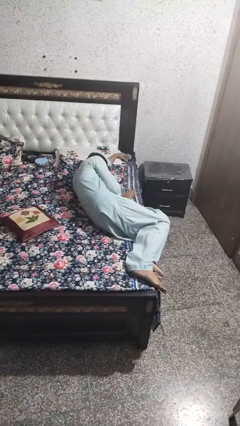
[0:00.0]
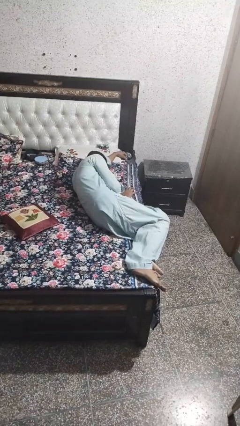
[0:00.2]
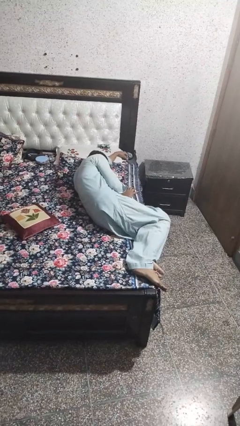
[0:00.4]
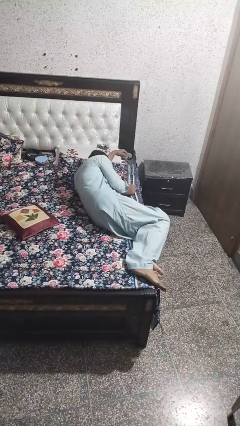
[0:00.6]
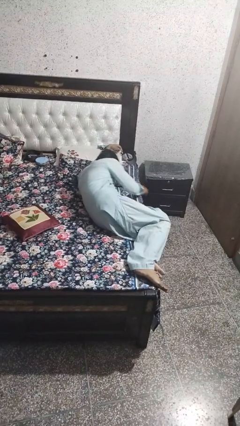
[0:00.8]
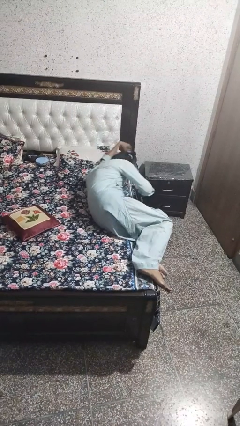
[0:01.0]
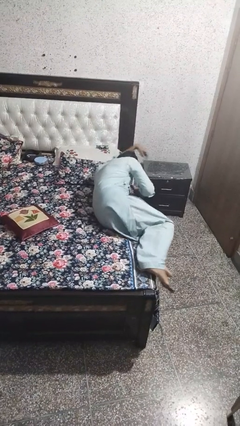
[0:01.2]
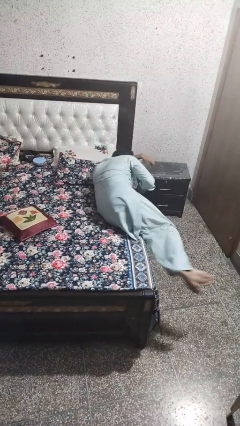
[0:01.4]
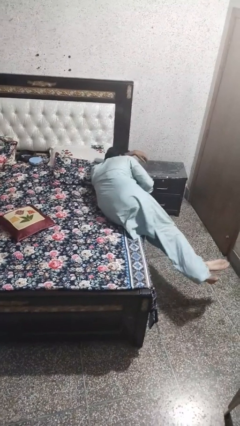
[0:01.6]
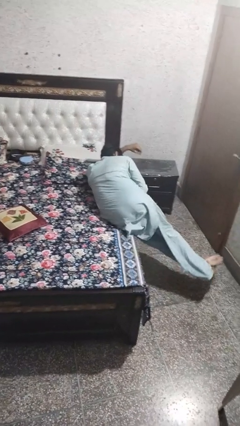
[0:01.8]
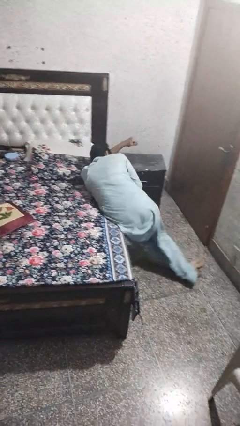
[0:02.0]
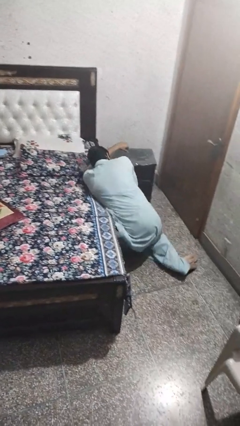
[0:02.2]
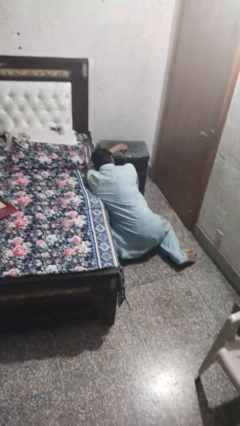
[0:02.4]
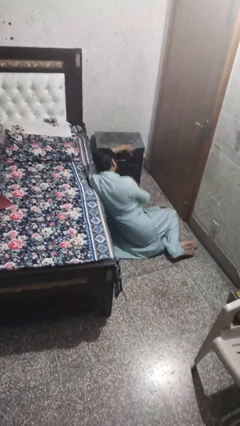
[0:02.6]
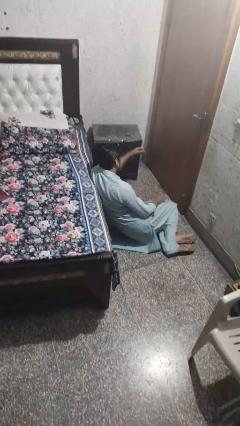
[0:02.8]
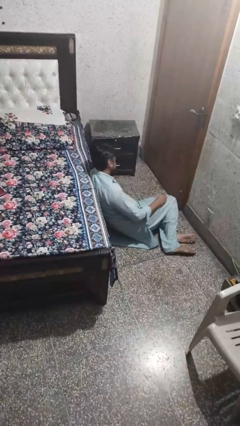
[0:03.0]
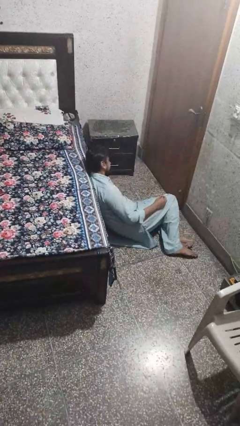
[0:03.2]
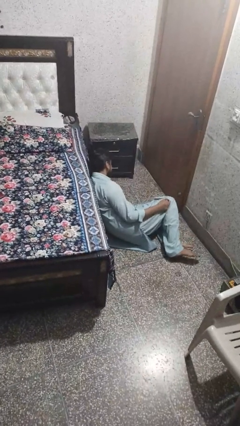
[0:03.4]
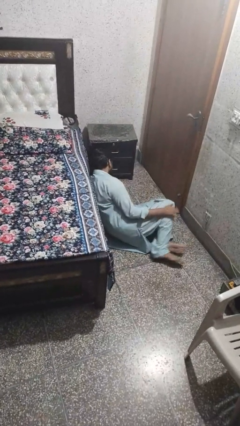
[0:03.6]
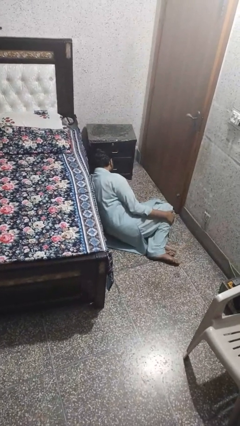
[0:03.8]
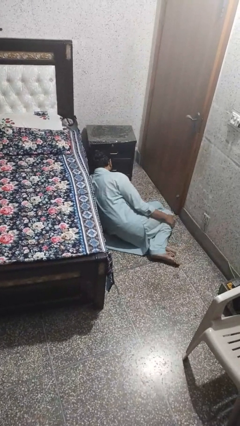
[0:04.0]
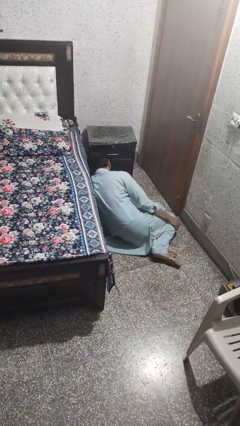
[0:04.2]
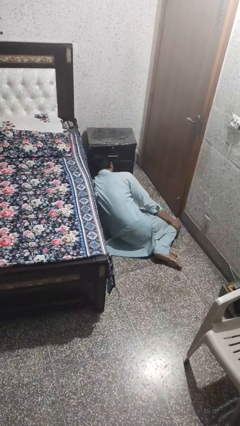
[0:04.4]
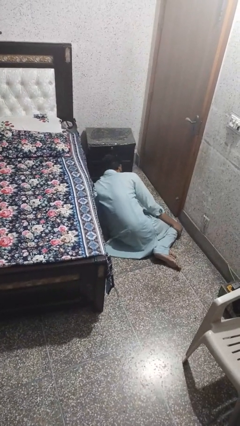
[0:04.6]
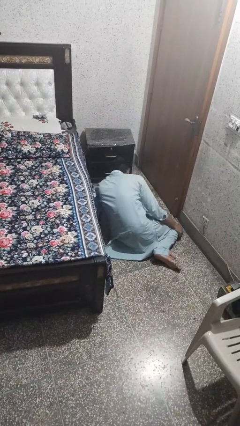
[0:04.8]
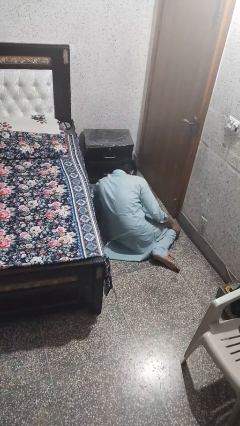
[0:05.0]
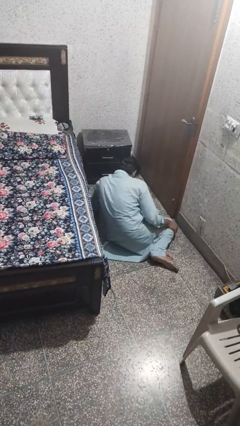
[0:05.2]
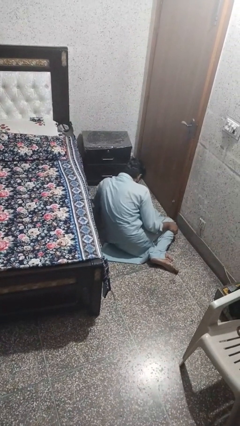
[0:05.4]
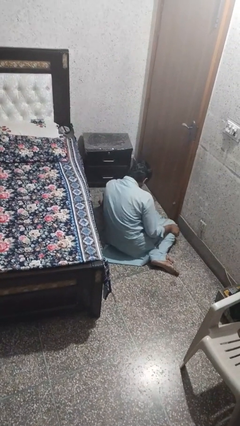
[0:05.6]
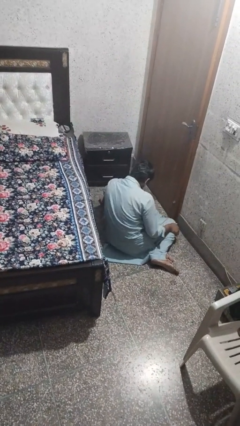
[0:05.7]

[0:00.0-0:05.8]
person falls from bed

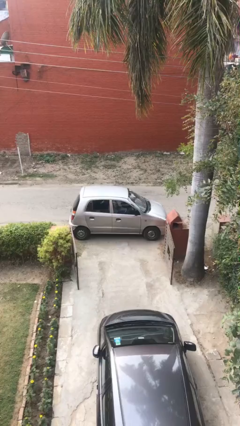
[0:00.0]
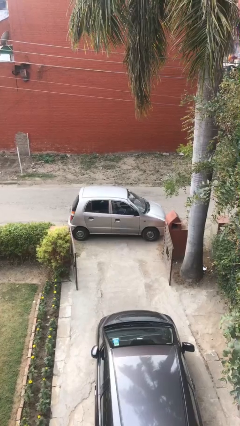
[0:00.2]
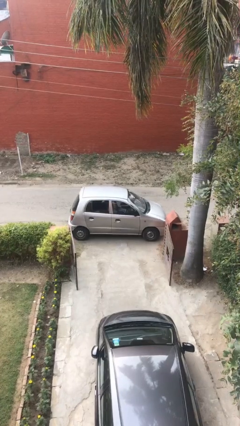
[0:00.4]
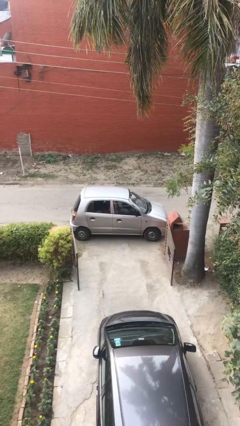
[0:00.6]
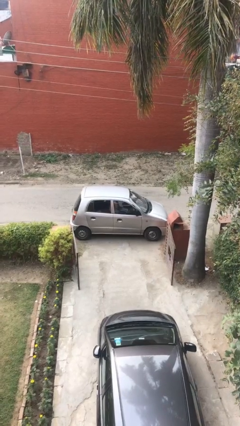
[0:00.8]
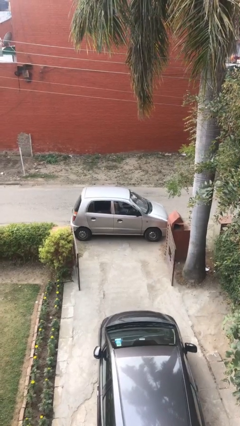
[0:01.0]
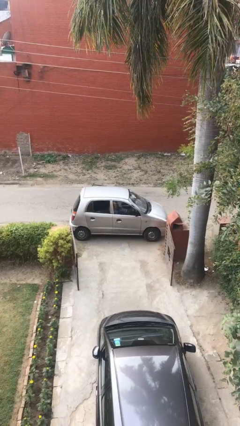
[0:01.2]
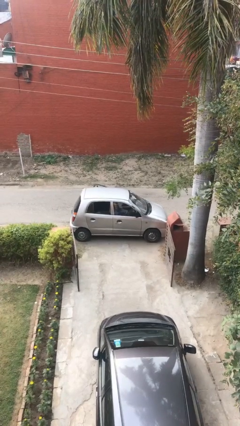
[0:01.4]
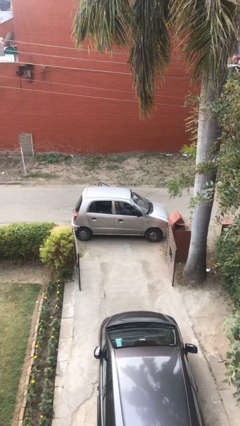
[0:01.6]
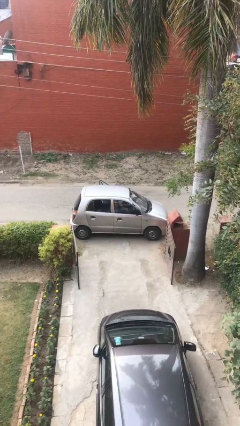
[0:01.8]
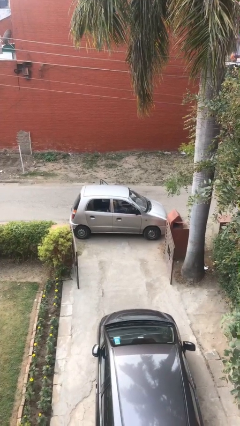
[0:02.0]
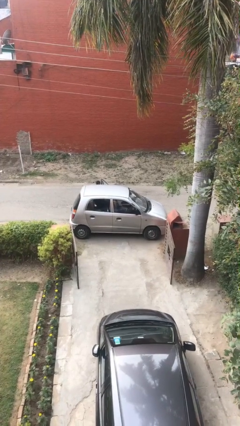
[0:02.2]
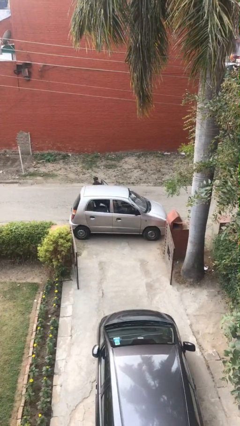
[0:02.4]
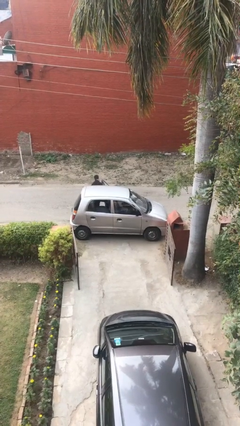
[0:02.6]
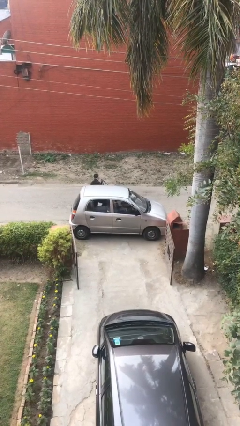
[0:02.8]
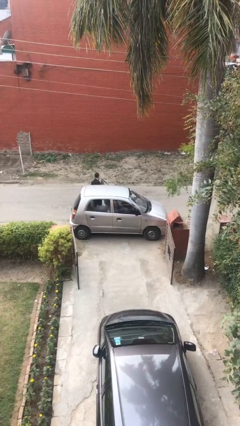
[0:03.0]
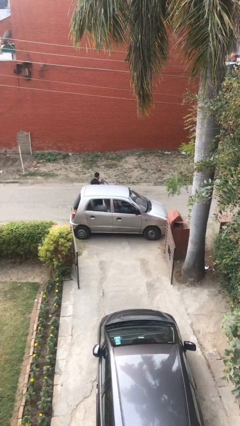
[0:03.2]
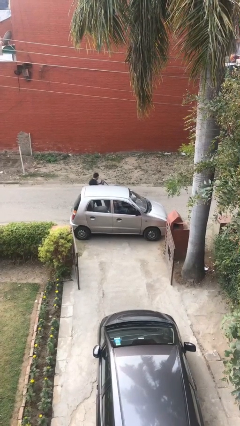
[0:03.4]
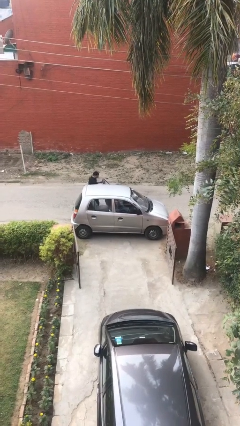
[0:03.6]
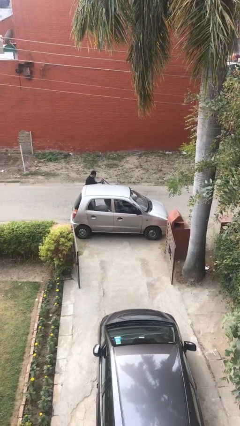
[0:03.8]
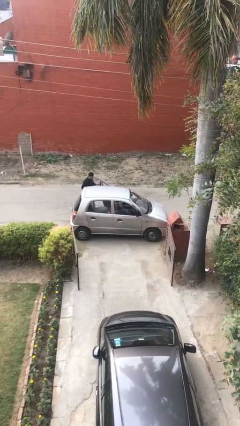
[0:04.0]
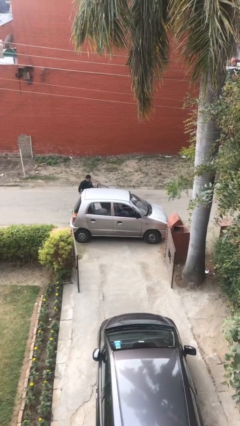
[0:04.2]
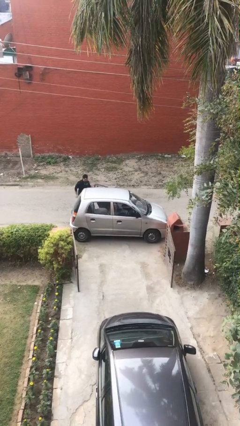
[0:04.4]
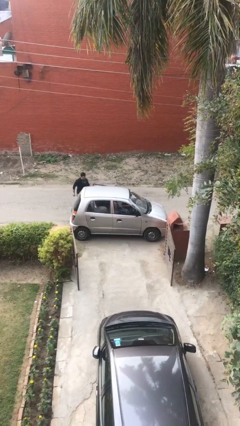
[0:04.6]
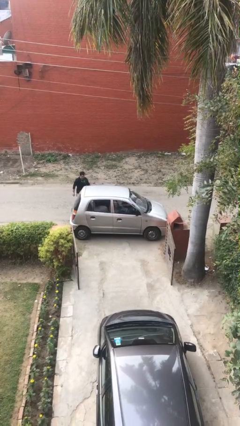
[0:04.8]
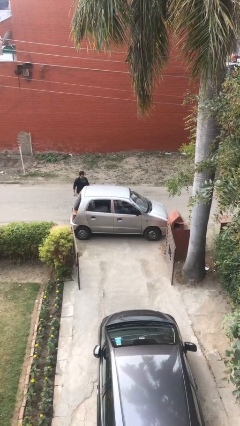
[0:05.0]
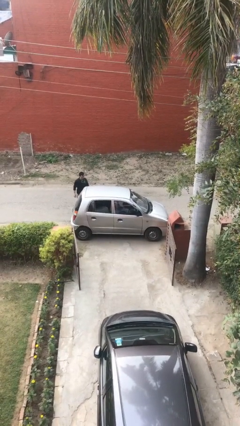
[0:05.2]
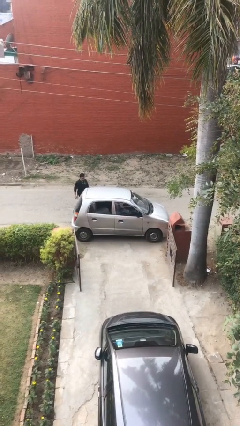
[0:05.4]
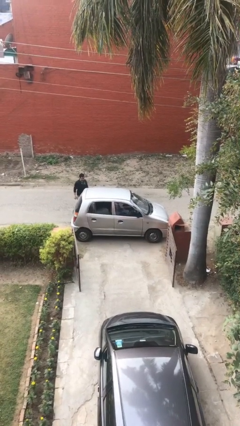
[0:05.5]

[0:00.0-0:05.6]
car drops off person

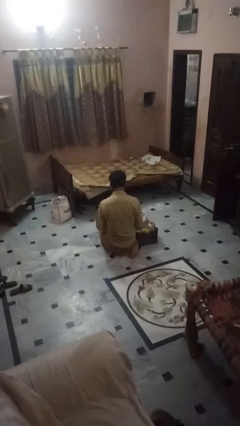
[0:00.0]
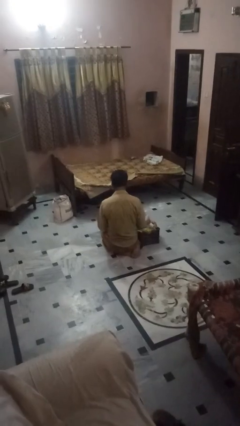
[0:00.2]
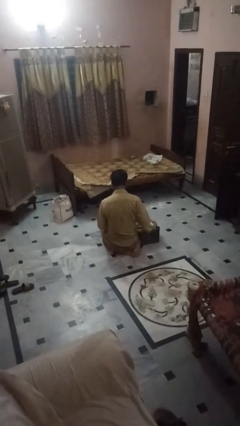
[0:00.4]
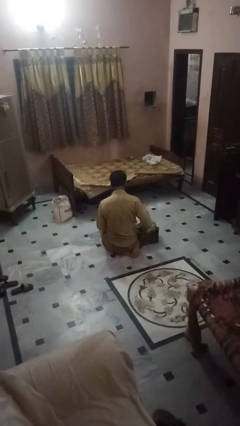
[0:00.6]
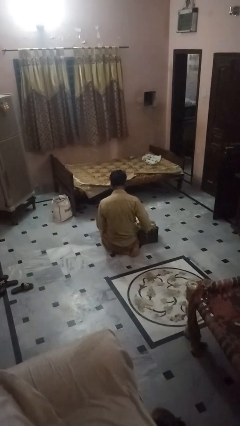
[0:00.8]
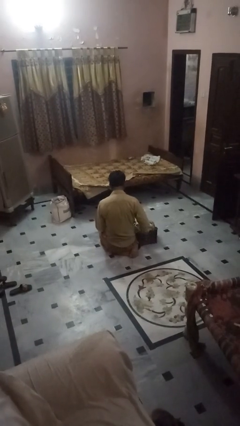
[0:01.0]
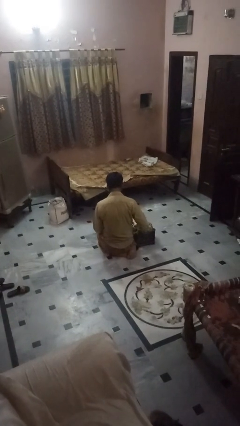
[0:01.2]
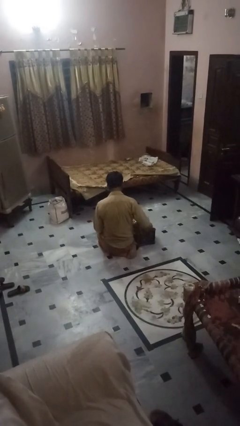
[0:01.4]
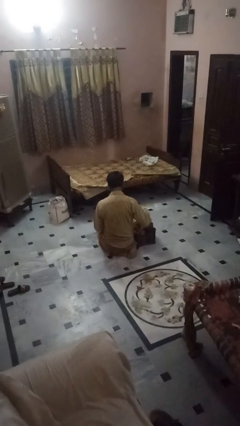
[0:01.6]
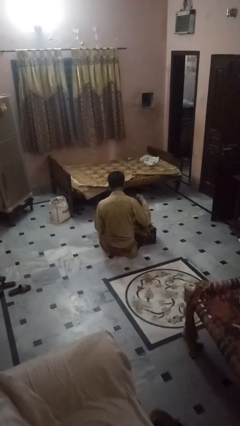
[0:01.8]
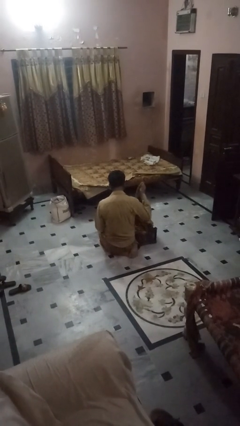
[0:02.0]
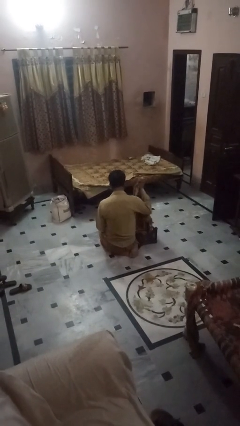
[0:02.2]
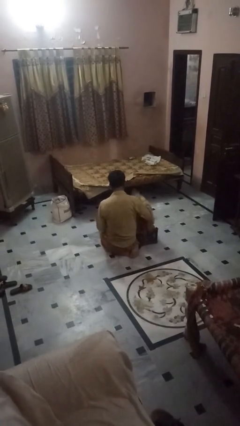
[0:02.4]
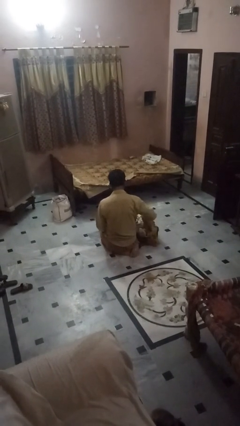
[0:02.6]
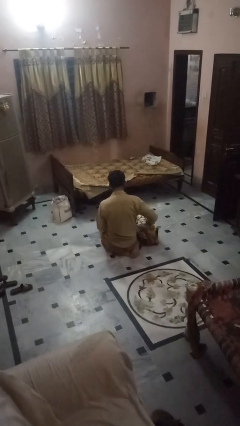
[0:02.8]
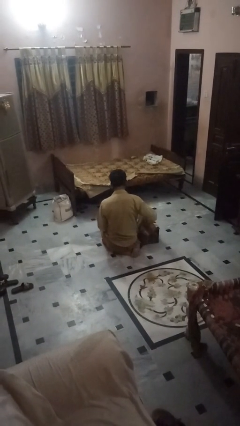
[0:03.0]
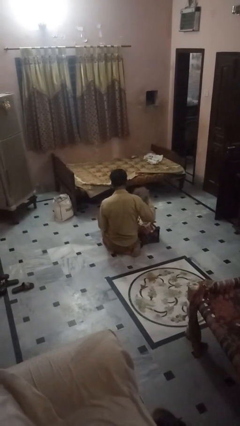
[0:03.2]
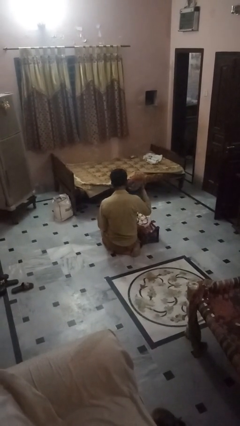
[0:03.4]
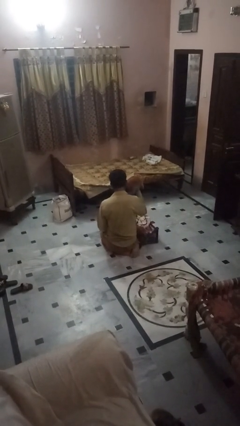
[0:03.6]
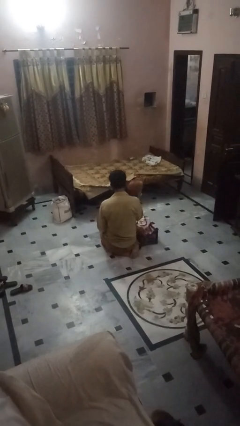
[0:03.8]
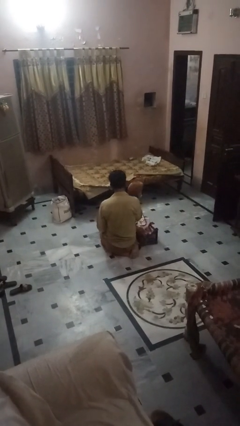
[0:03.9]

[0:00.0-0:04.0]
person takes object from bag

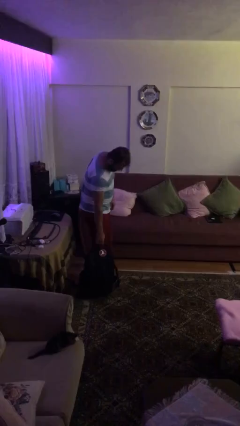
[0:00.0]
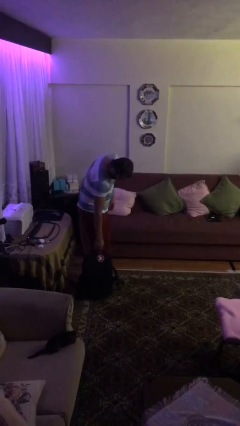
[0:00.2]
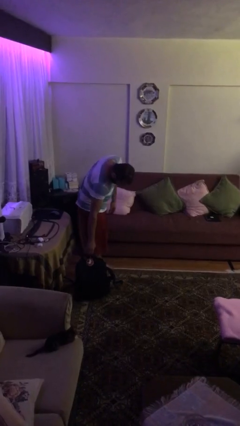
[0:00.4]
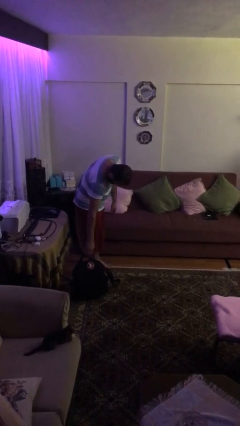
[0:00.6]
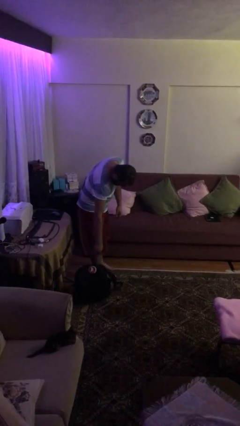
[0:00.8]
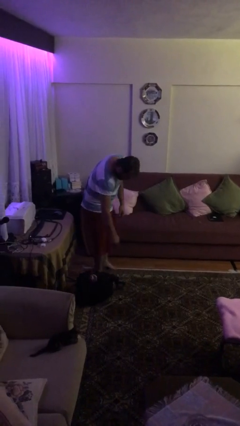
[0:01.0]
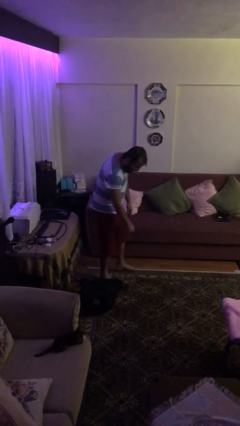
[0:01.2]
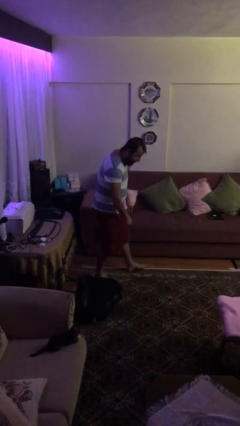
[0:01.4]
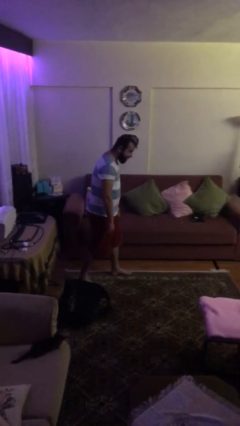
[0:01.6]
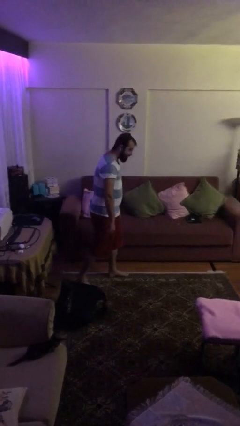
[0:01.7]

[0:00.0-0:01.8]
person puts down object on floor

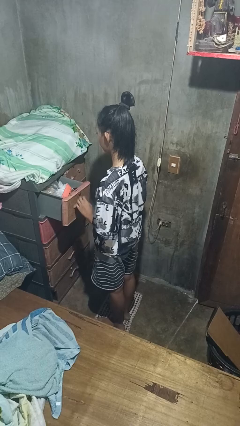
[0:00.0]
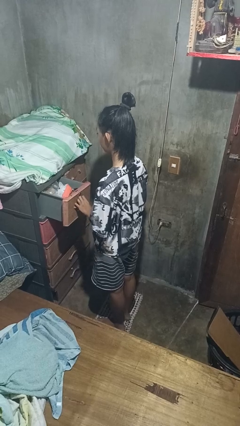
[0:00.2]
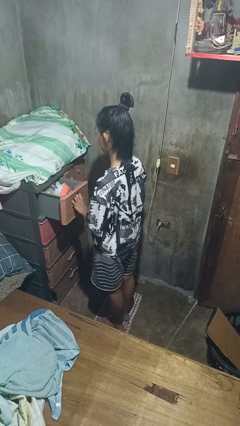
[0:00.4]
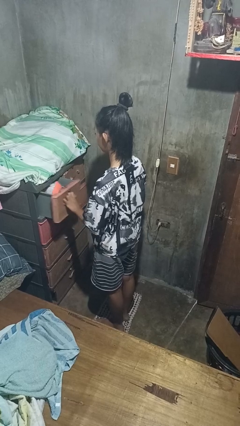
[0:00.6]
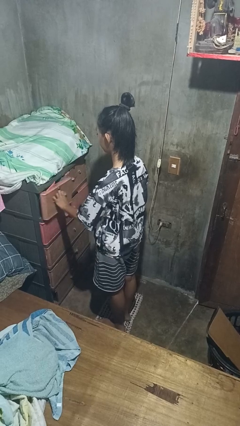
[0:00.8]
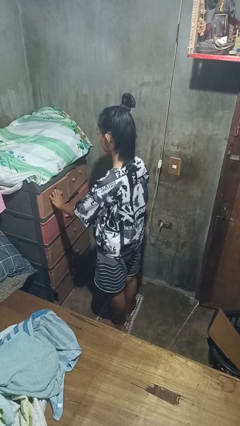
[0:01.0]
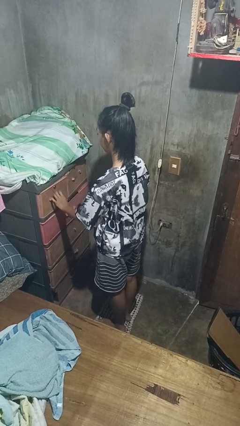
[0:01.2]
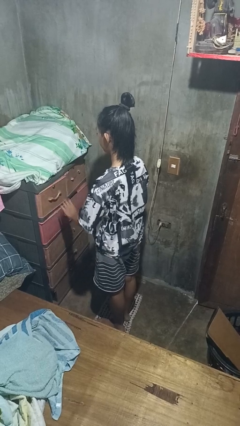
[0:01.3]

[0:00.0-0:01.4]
person closes dresser drawer
